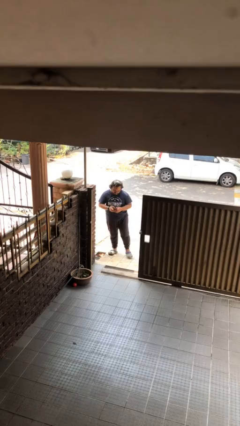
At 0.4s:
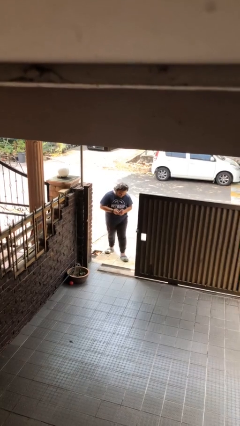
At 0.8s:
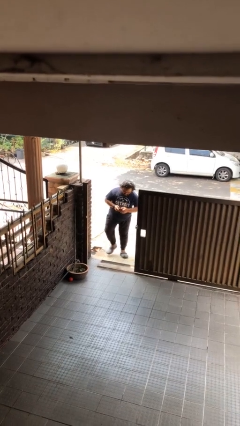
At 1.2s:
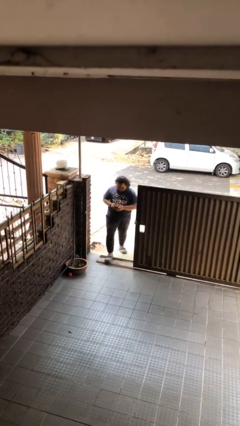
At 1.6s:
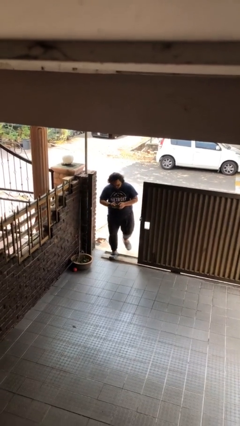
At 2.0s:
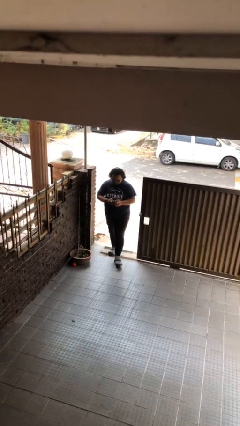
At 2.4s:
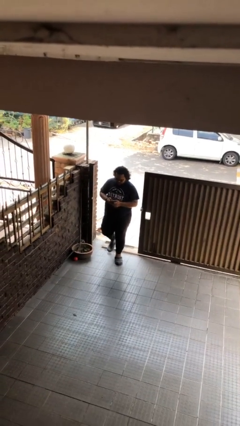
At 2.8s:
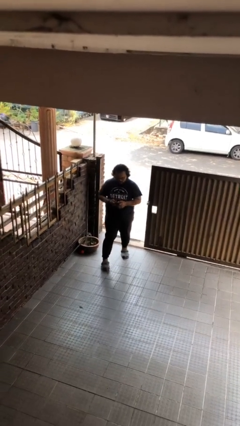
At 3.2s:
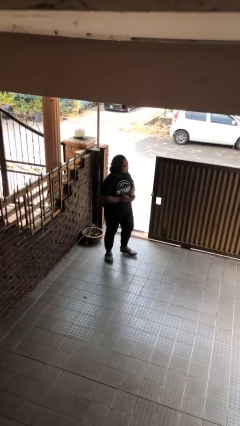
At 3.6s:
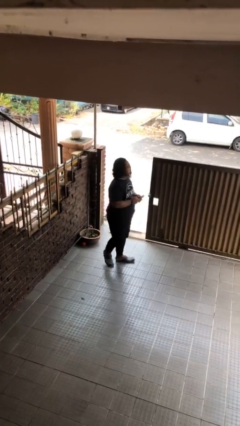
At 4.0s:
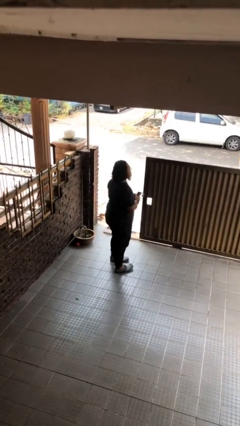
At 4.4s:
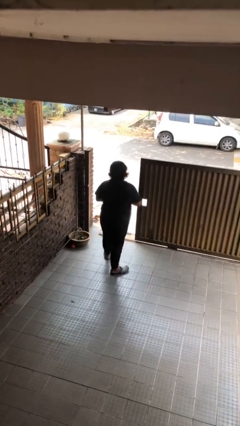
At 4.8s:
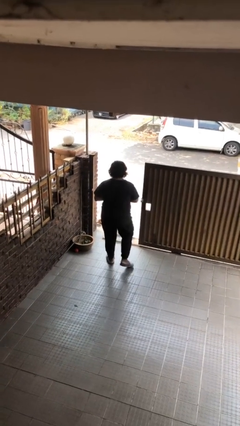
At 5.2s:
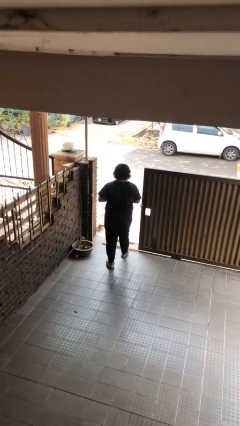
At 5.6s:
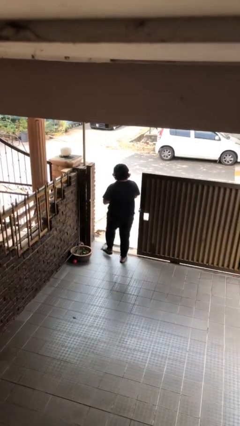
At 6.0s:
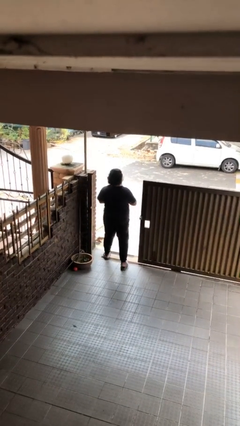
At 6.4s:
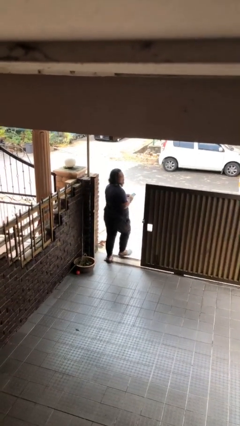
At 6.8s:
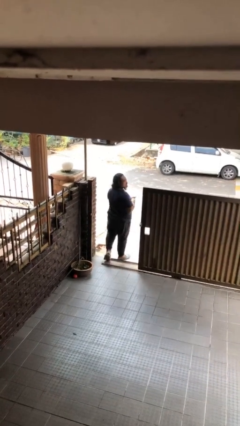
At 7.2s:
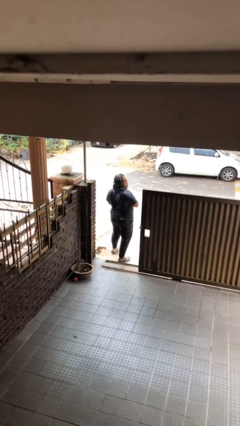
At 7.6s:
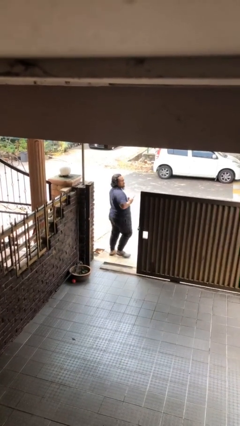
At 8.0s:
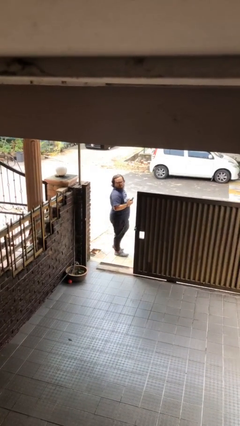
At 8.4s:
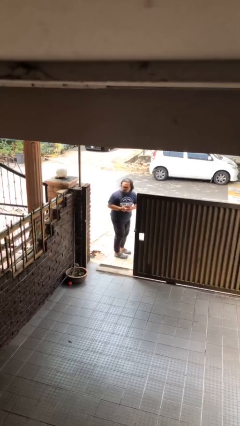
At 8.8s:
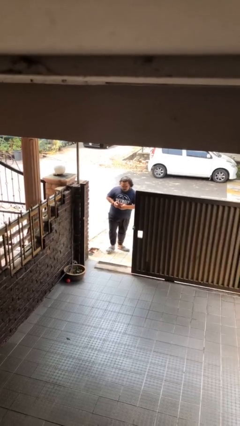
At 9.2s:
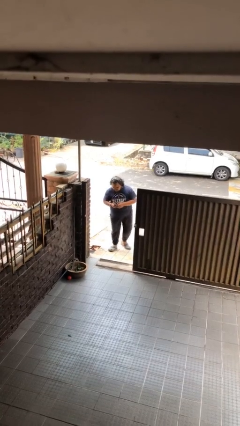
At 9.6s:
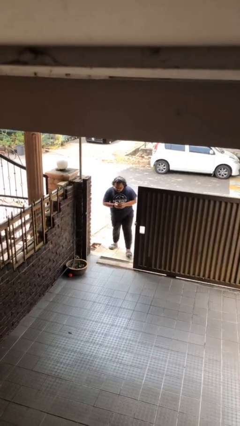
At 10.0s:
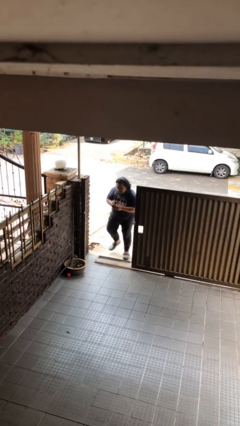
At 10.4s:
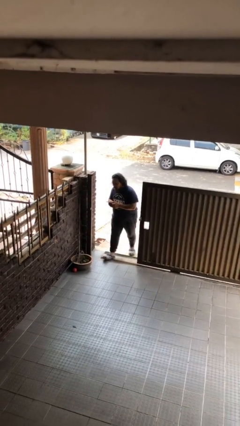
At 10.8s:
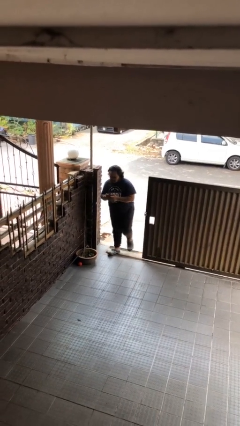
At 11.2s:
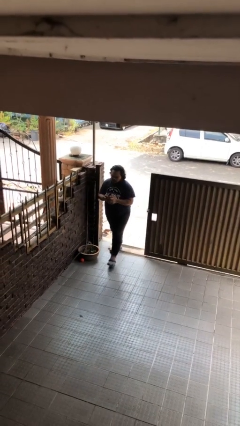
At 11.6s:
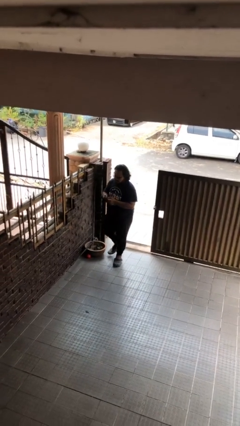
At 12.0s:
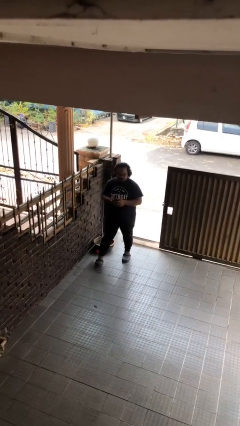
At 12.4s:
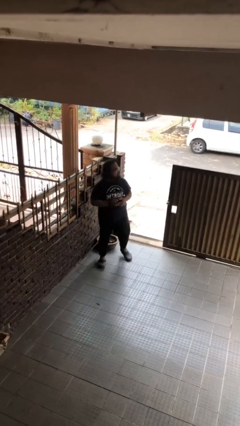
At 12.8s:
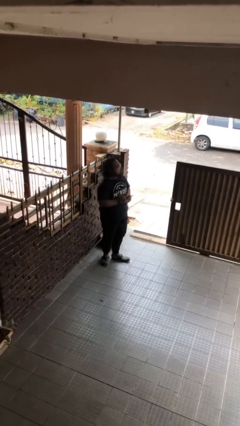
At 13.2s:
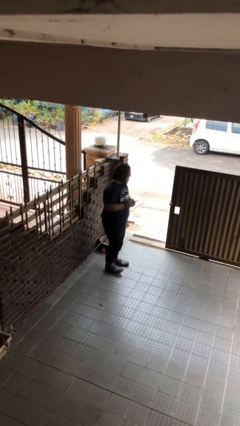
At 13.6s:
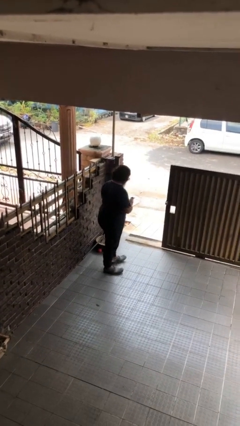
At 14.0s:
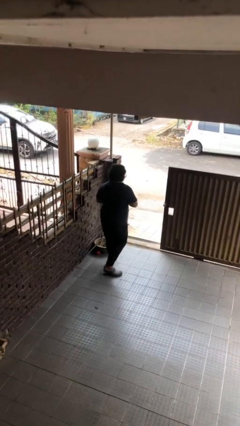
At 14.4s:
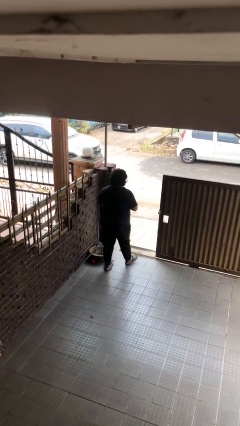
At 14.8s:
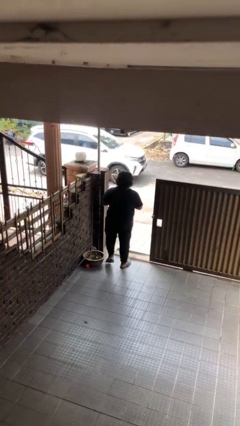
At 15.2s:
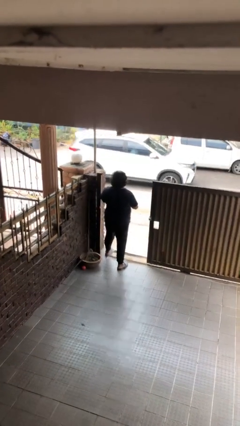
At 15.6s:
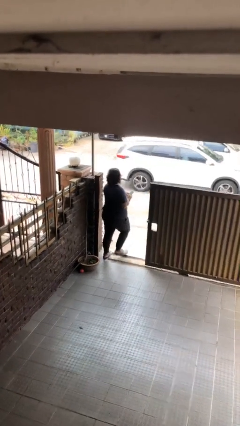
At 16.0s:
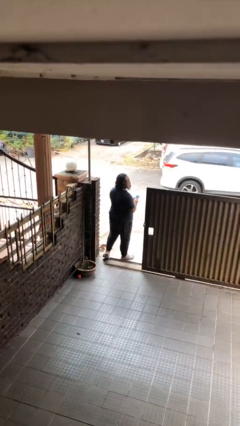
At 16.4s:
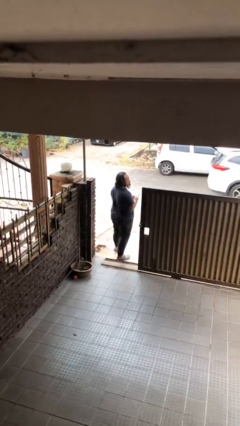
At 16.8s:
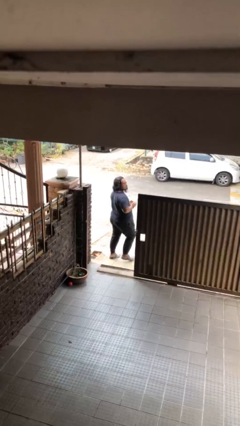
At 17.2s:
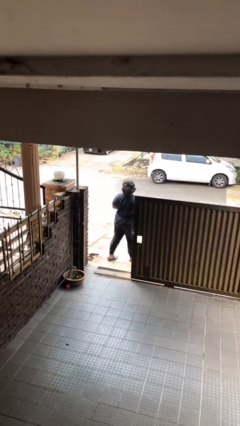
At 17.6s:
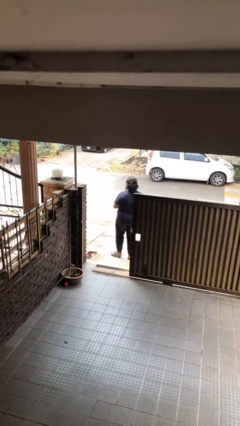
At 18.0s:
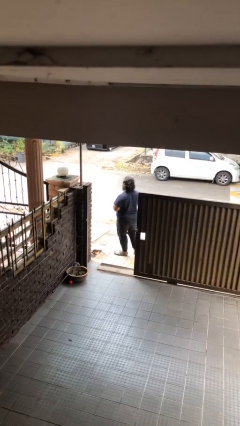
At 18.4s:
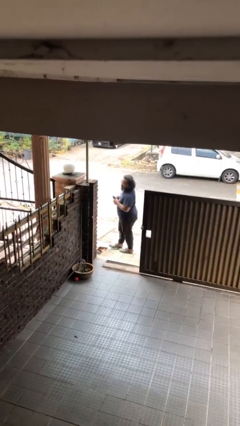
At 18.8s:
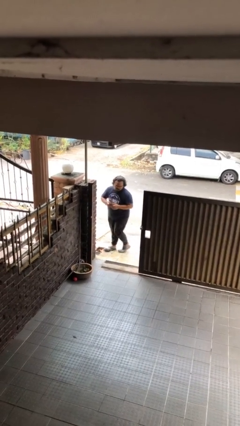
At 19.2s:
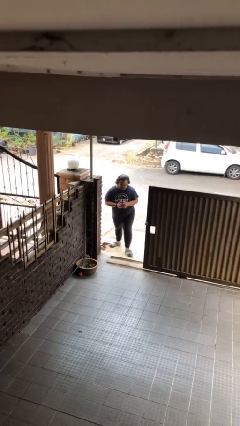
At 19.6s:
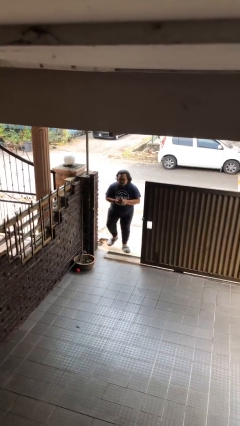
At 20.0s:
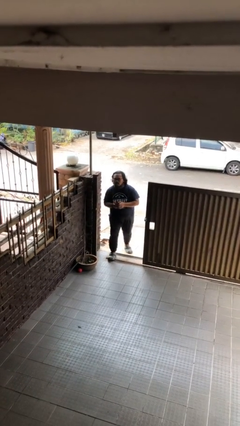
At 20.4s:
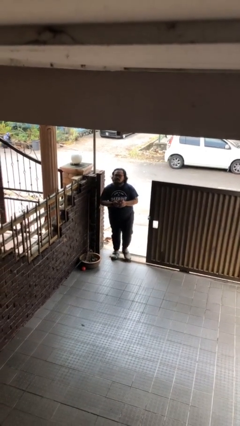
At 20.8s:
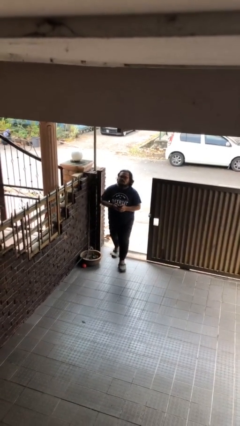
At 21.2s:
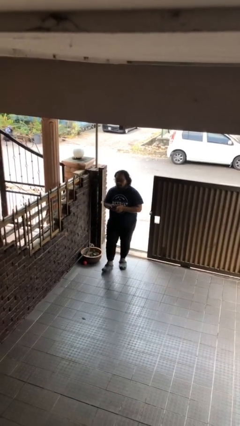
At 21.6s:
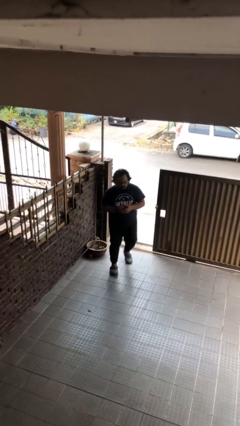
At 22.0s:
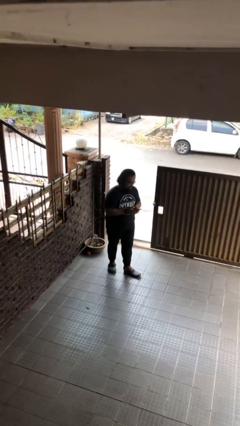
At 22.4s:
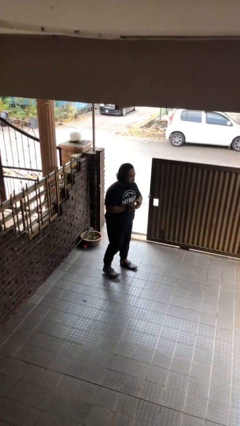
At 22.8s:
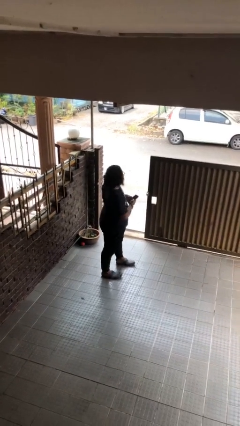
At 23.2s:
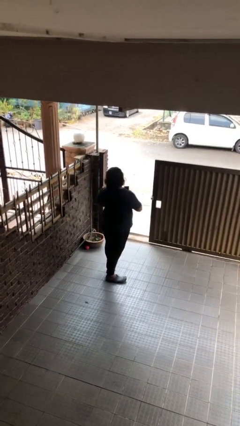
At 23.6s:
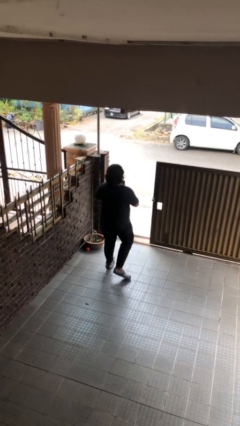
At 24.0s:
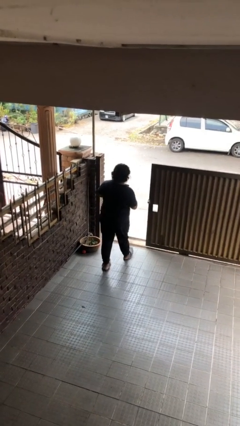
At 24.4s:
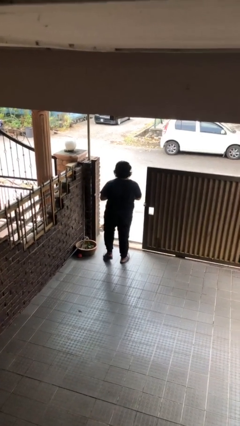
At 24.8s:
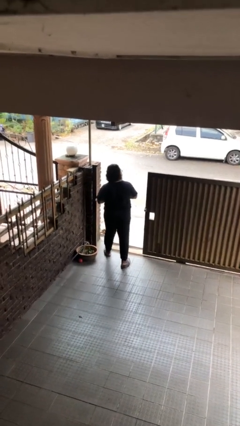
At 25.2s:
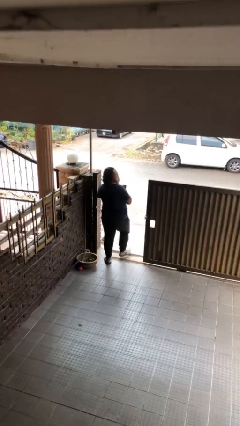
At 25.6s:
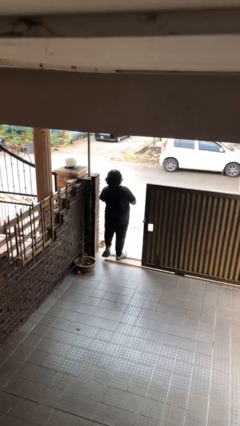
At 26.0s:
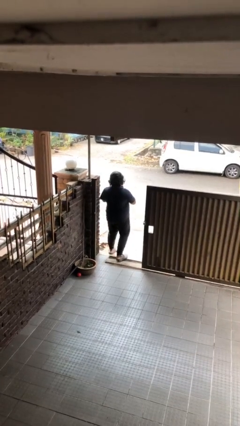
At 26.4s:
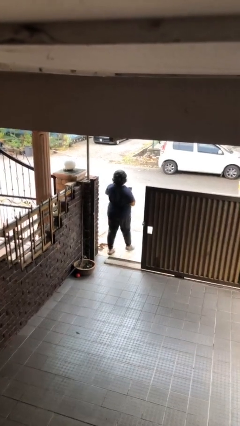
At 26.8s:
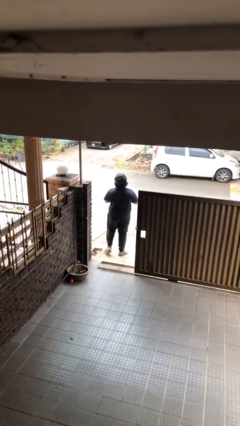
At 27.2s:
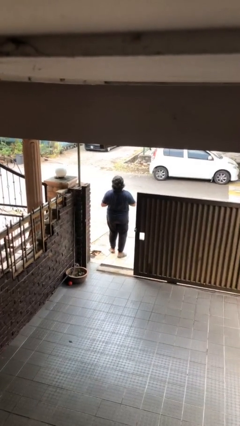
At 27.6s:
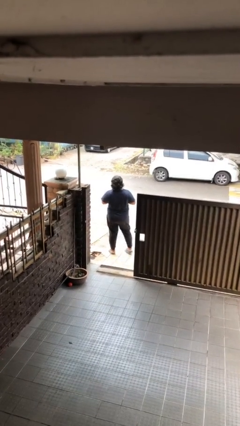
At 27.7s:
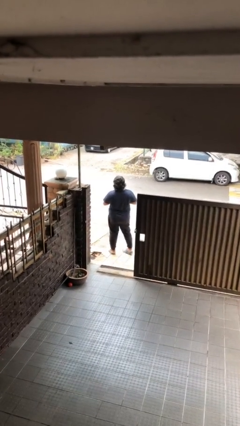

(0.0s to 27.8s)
person texts on phone

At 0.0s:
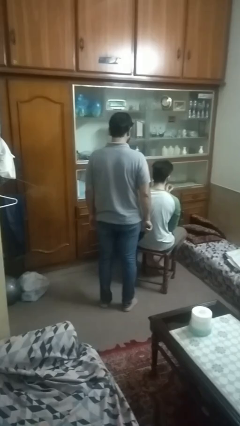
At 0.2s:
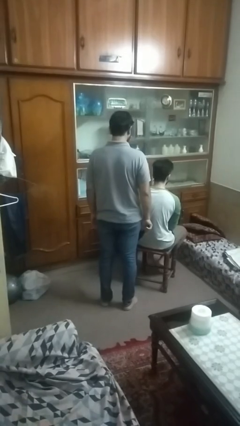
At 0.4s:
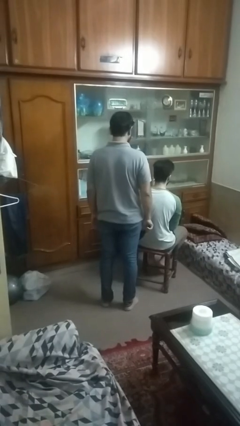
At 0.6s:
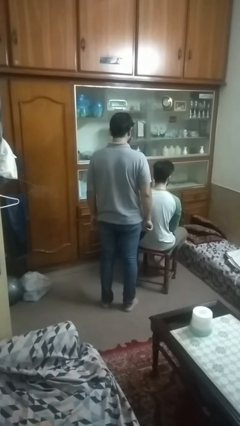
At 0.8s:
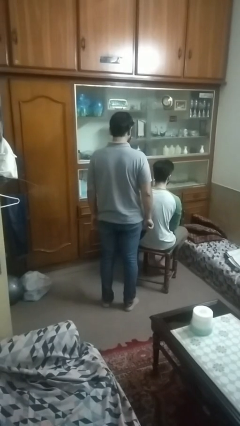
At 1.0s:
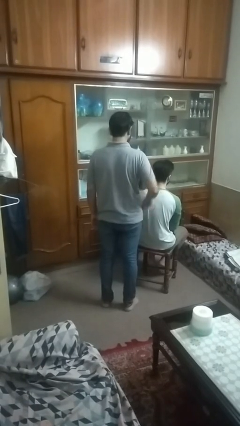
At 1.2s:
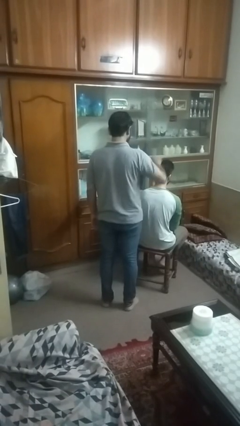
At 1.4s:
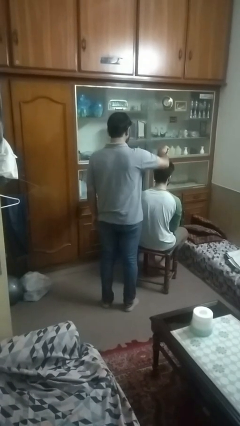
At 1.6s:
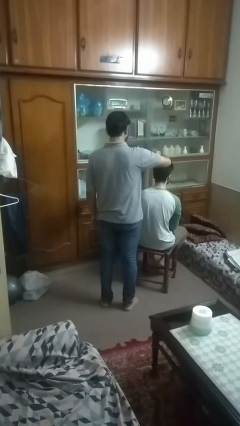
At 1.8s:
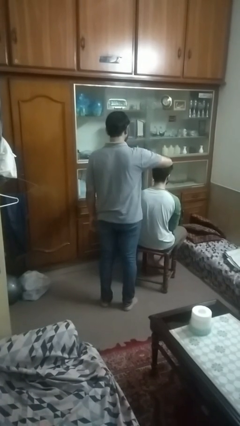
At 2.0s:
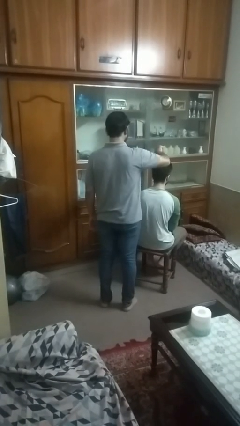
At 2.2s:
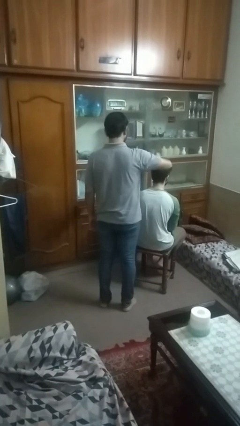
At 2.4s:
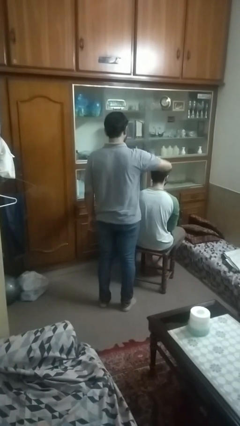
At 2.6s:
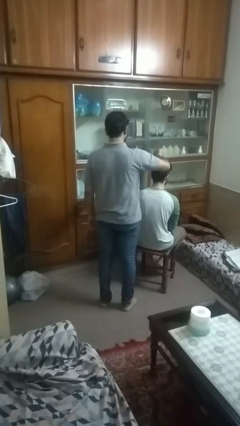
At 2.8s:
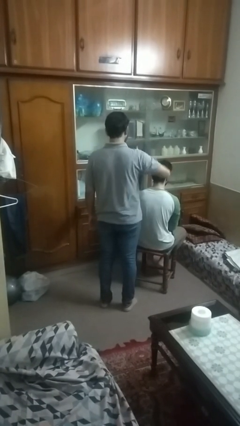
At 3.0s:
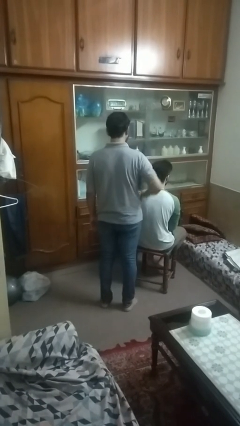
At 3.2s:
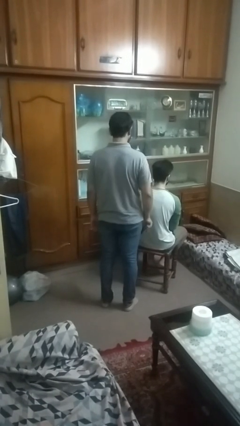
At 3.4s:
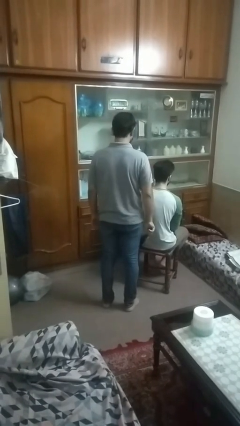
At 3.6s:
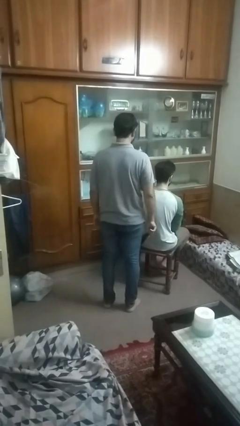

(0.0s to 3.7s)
person brushes hair of person

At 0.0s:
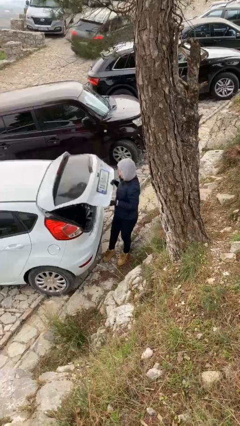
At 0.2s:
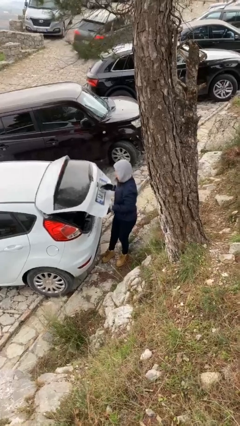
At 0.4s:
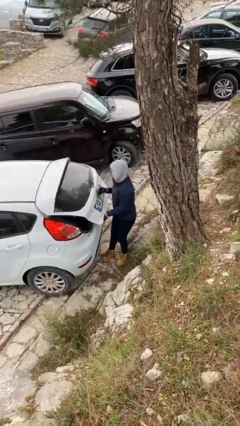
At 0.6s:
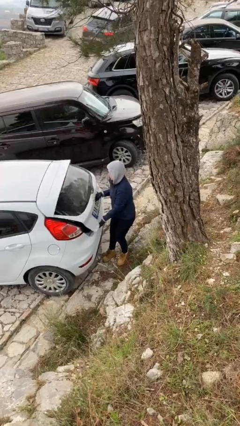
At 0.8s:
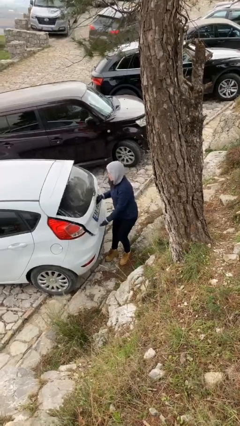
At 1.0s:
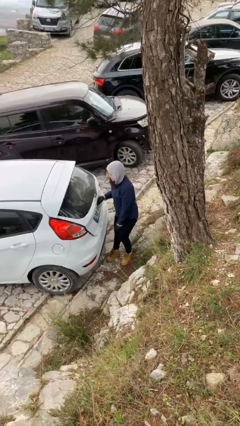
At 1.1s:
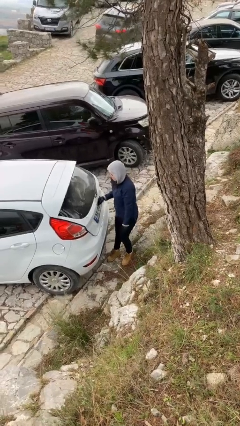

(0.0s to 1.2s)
person closes car trunk
